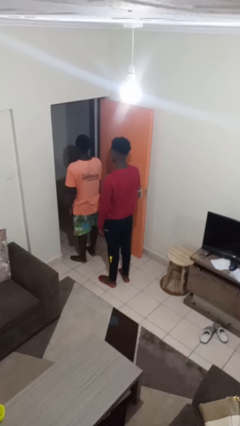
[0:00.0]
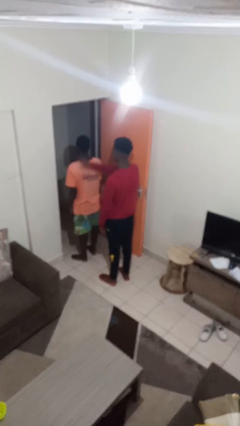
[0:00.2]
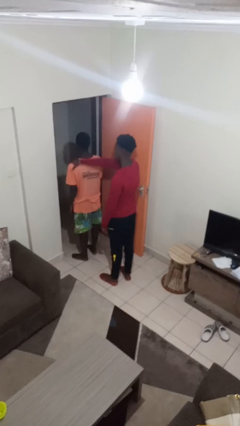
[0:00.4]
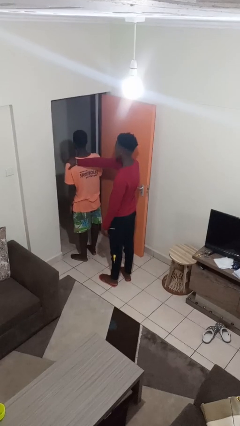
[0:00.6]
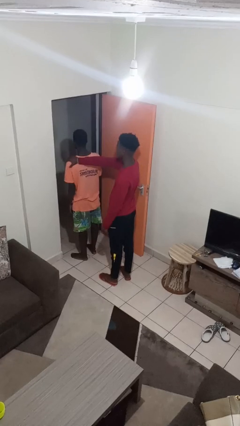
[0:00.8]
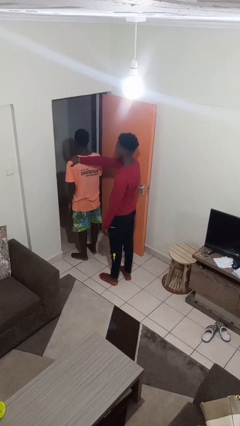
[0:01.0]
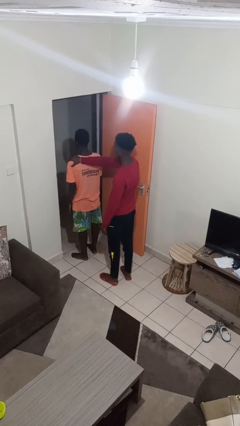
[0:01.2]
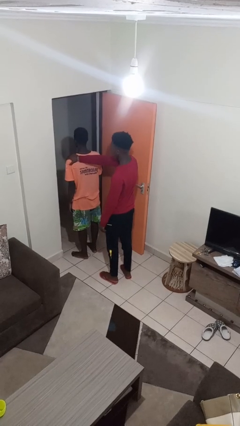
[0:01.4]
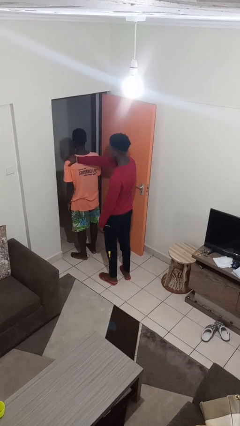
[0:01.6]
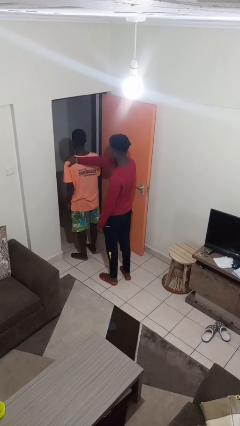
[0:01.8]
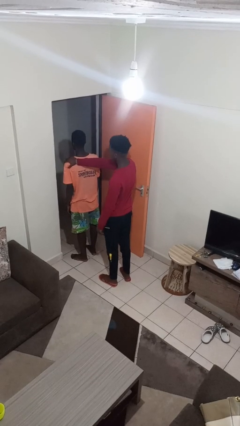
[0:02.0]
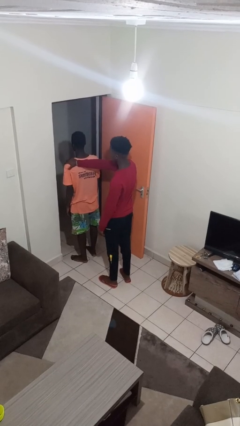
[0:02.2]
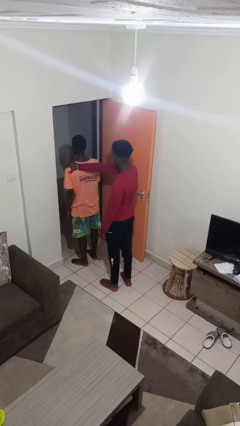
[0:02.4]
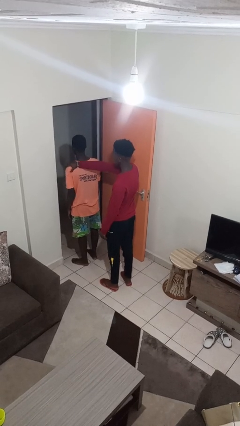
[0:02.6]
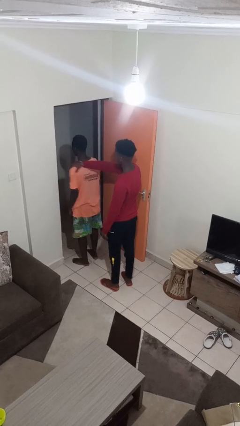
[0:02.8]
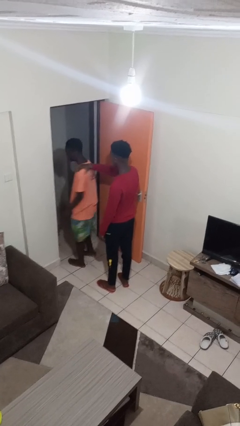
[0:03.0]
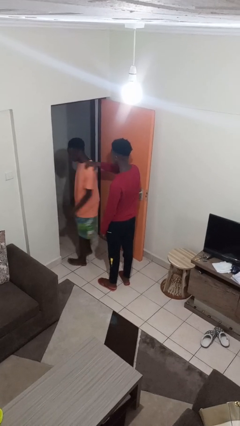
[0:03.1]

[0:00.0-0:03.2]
person grabs person by shoulder

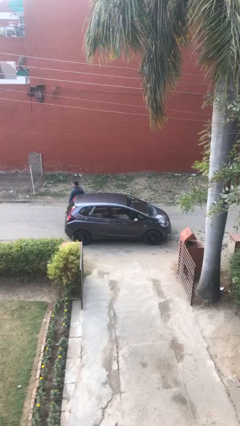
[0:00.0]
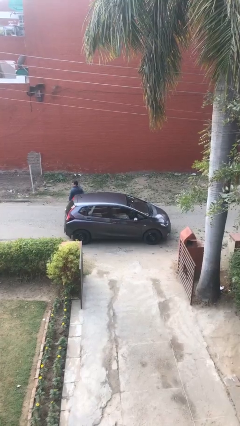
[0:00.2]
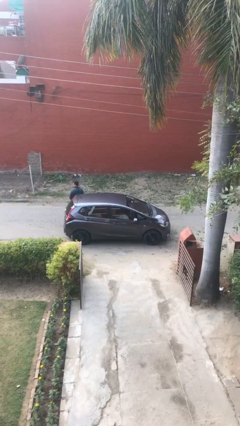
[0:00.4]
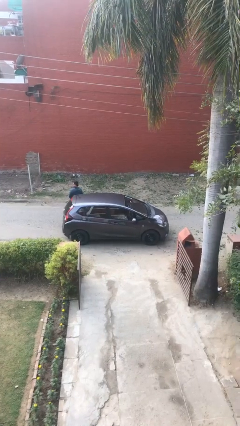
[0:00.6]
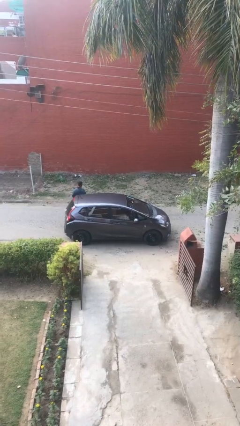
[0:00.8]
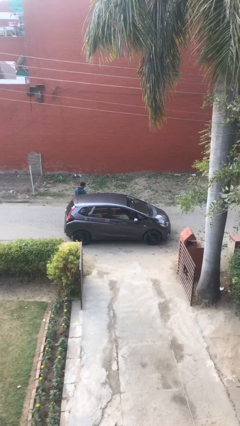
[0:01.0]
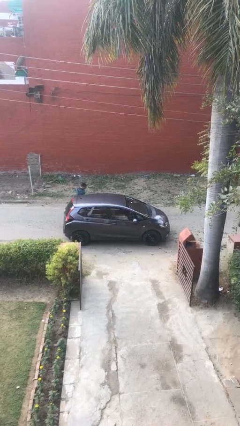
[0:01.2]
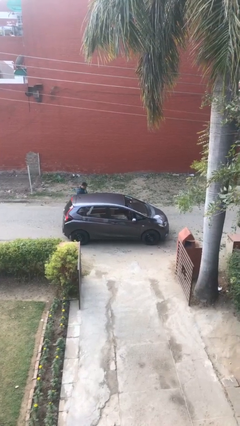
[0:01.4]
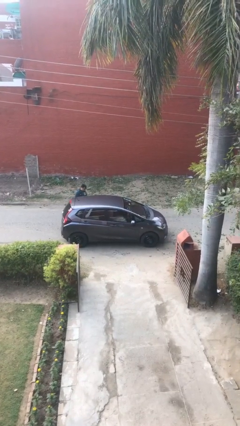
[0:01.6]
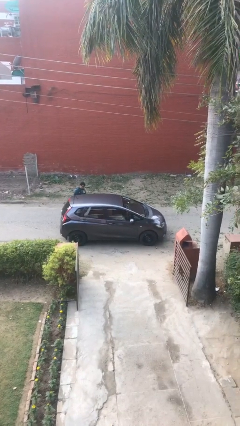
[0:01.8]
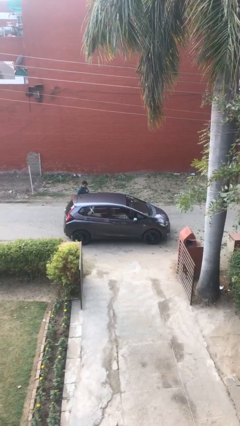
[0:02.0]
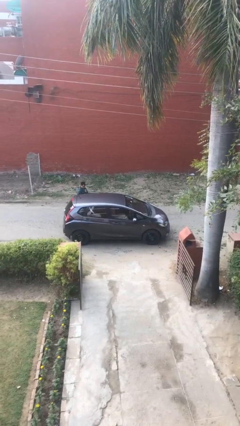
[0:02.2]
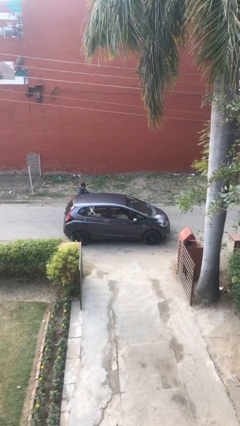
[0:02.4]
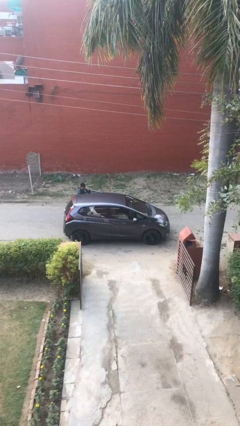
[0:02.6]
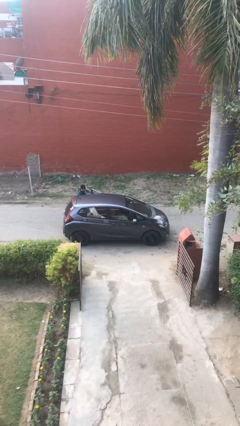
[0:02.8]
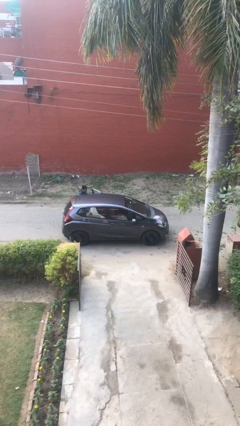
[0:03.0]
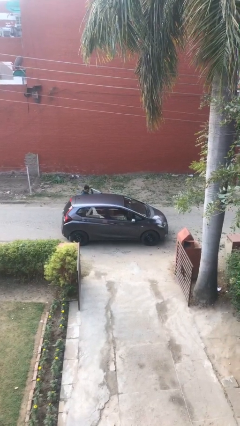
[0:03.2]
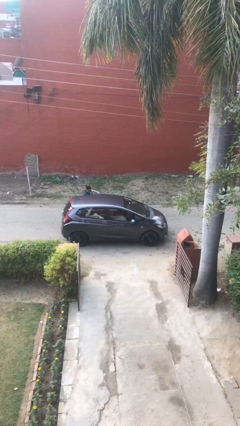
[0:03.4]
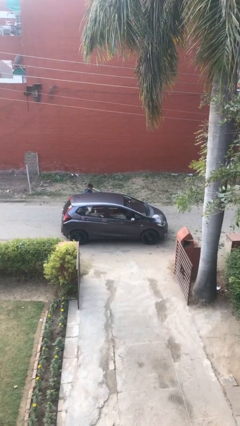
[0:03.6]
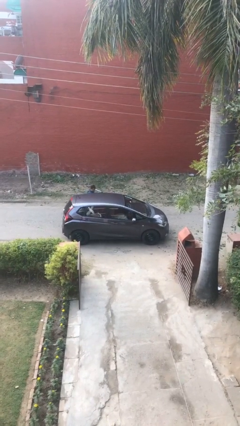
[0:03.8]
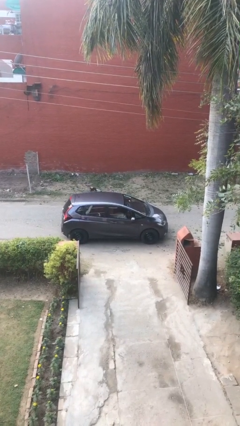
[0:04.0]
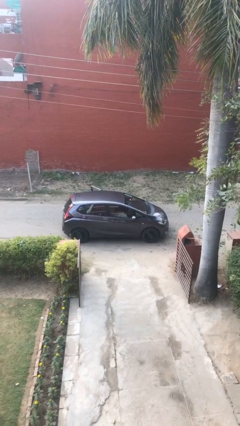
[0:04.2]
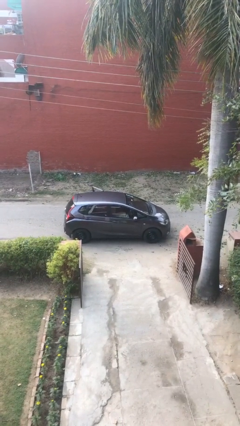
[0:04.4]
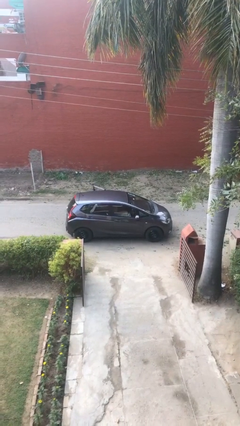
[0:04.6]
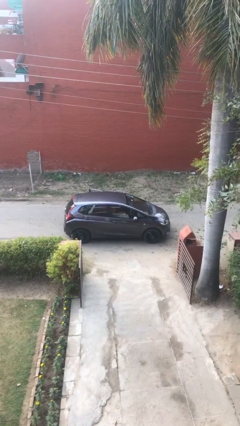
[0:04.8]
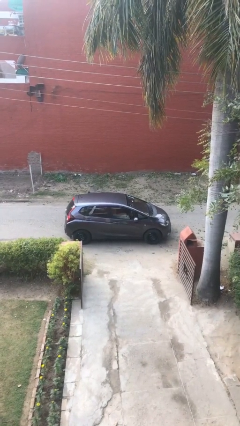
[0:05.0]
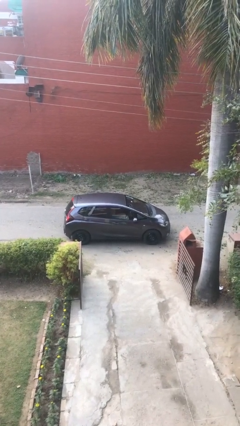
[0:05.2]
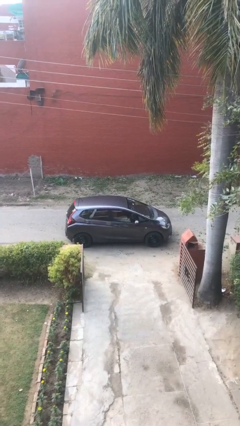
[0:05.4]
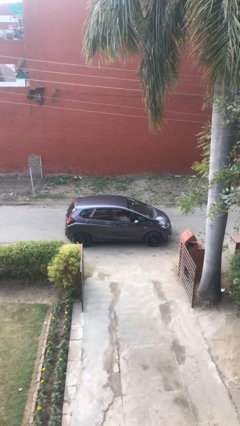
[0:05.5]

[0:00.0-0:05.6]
car picks up person

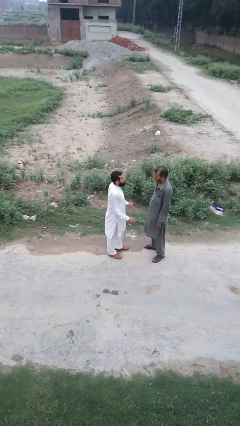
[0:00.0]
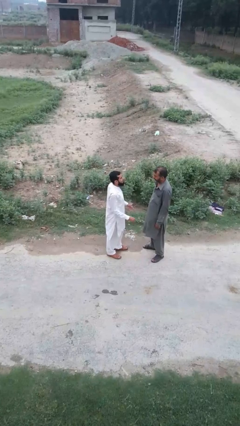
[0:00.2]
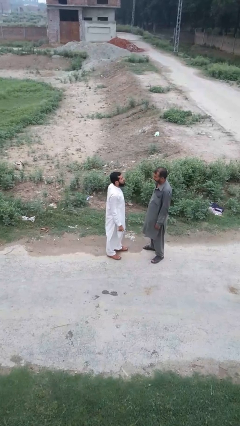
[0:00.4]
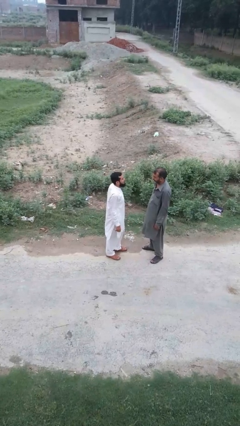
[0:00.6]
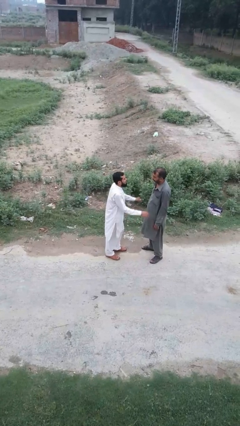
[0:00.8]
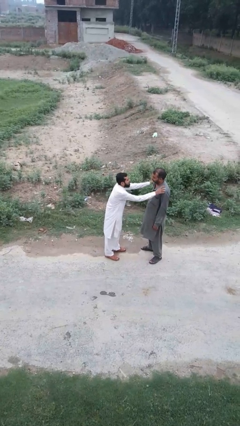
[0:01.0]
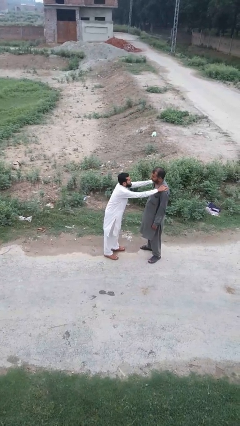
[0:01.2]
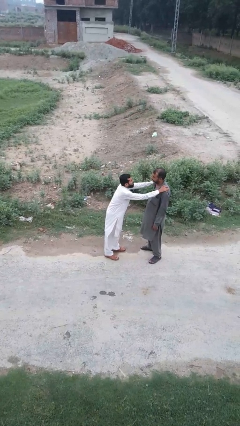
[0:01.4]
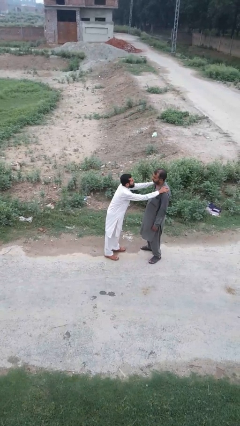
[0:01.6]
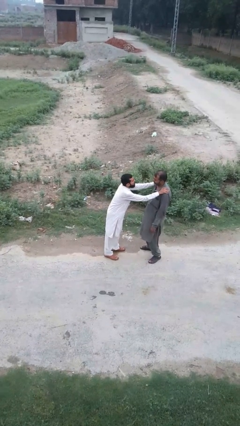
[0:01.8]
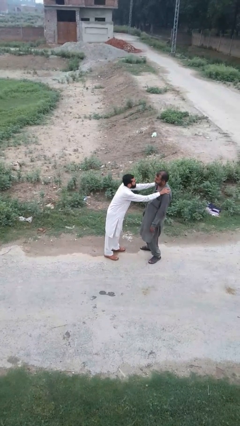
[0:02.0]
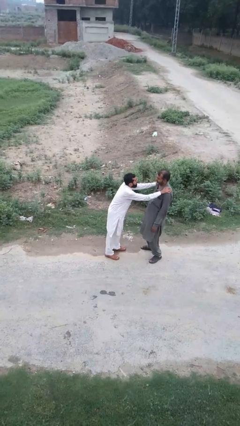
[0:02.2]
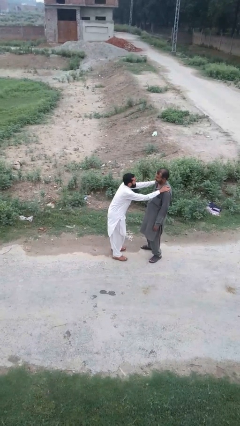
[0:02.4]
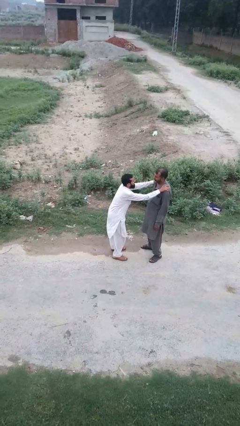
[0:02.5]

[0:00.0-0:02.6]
person pounds shoulders of person

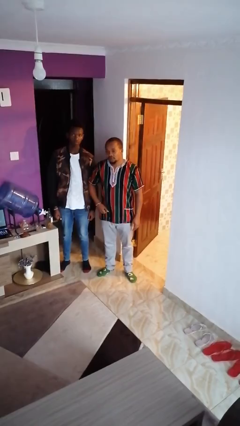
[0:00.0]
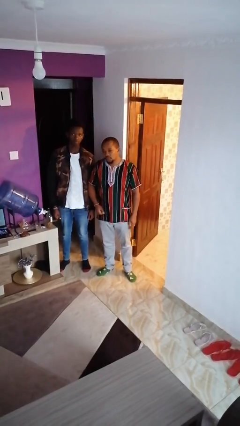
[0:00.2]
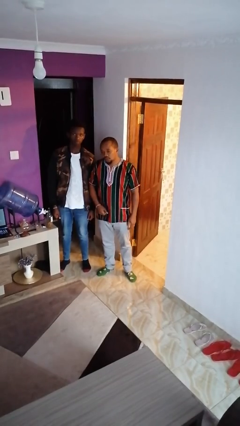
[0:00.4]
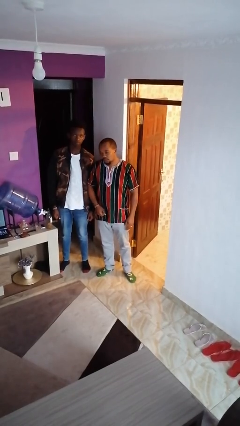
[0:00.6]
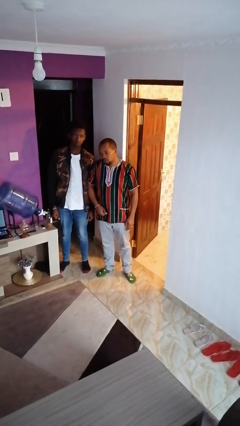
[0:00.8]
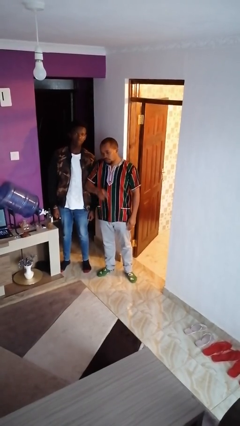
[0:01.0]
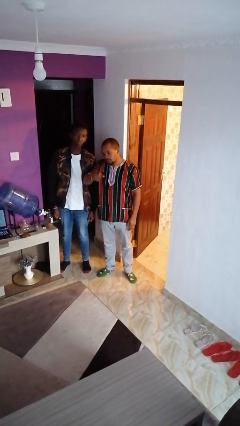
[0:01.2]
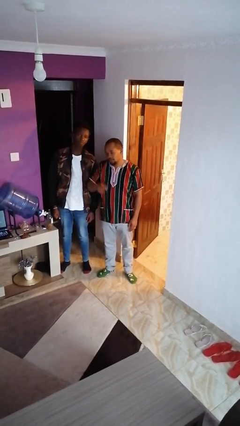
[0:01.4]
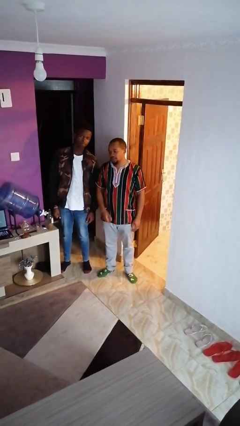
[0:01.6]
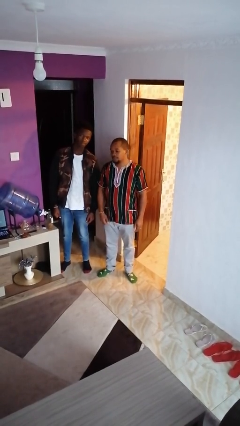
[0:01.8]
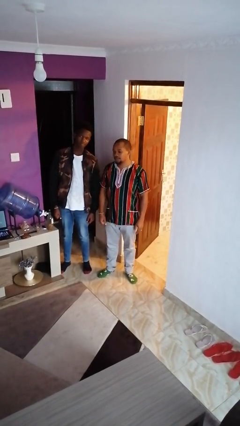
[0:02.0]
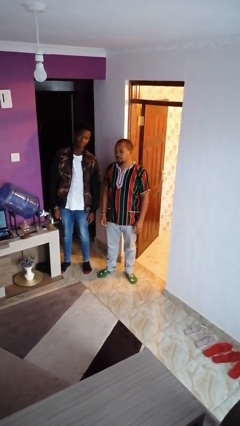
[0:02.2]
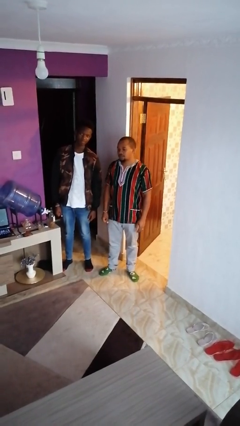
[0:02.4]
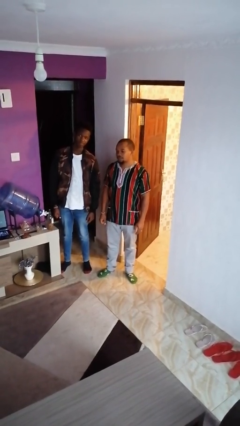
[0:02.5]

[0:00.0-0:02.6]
person nudges person with elbow

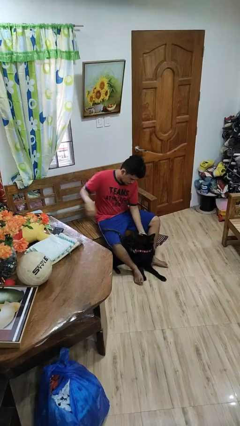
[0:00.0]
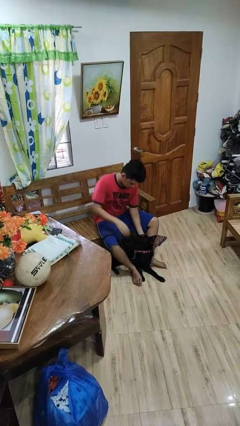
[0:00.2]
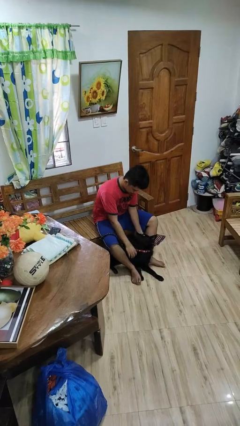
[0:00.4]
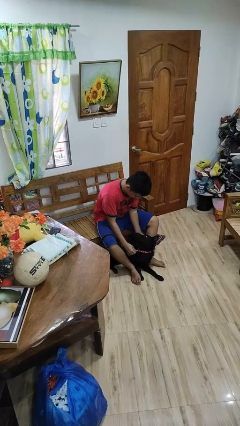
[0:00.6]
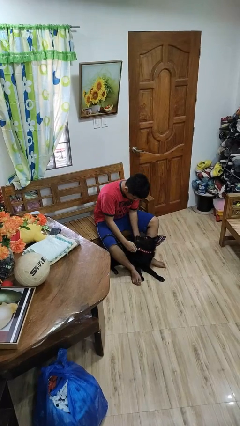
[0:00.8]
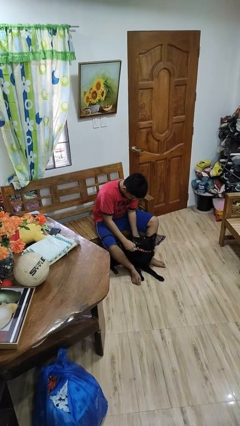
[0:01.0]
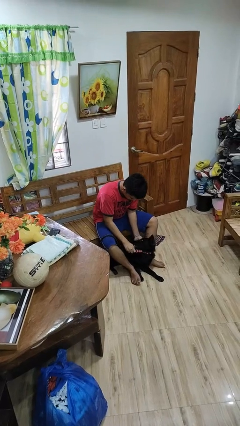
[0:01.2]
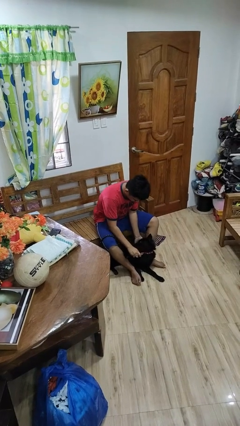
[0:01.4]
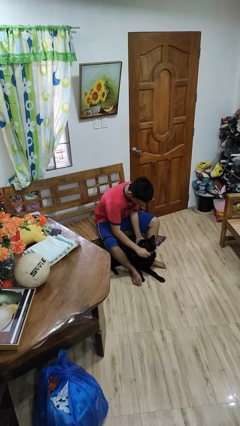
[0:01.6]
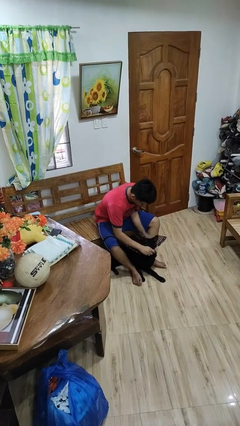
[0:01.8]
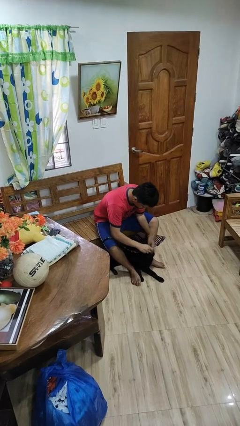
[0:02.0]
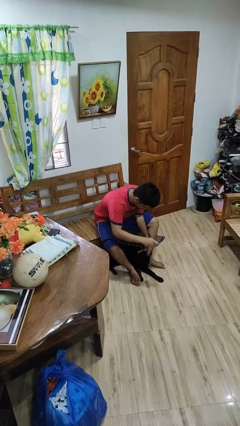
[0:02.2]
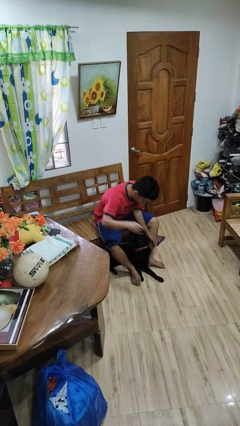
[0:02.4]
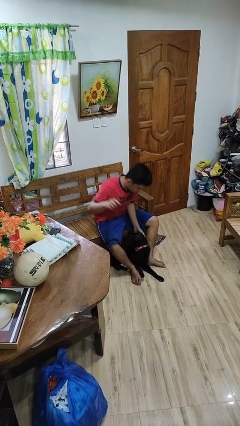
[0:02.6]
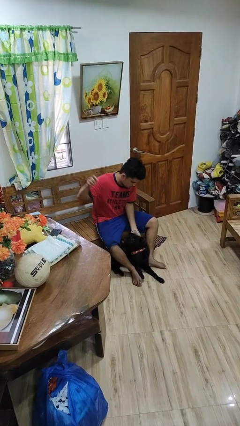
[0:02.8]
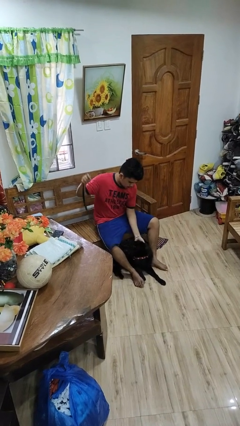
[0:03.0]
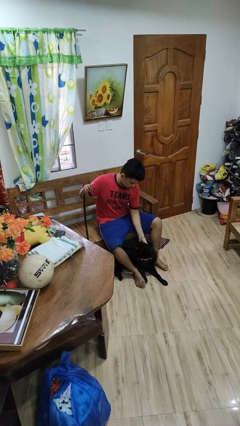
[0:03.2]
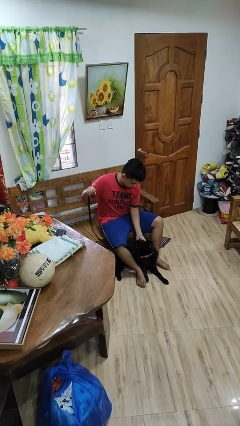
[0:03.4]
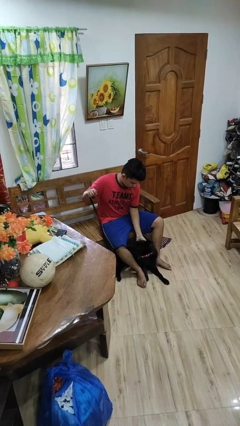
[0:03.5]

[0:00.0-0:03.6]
person unattaches leash from dog
